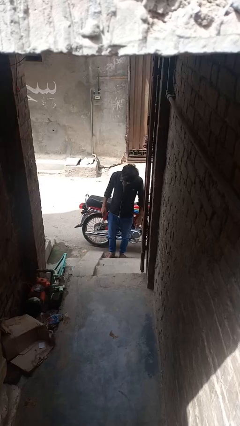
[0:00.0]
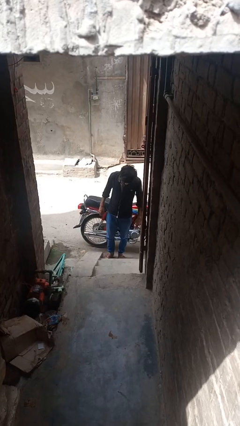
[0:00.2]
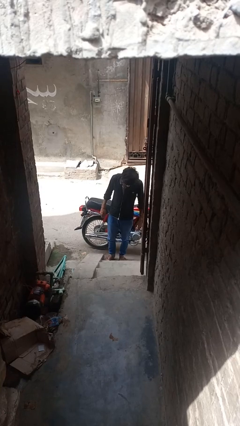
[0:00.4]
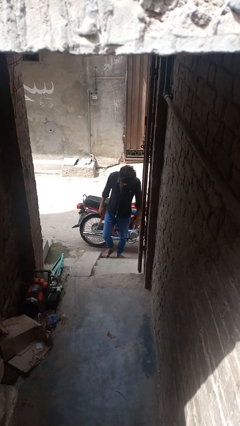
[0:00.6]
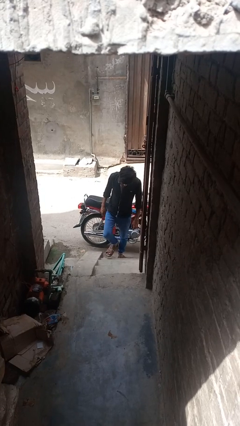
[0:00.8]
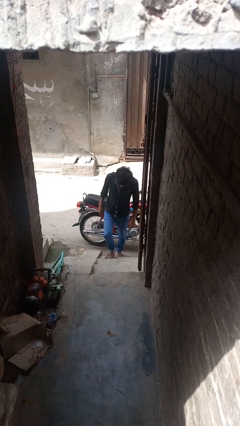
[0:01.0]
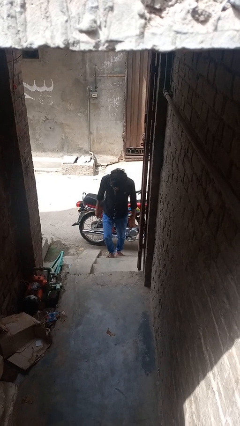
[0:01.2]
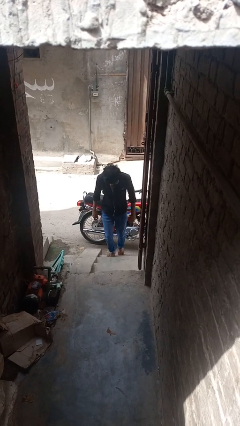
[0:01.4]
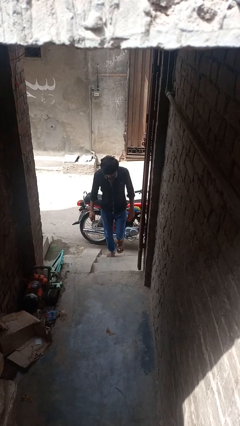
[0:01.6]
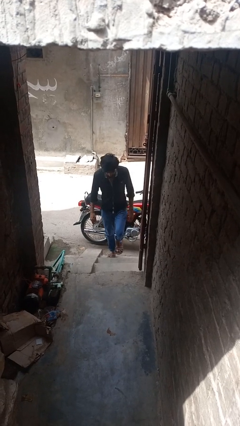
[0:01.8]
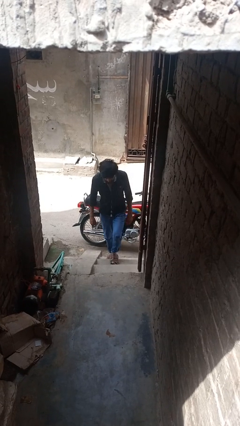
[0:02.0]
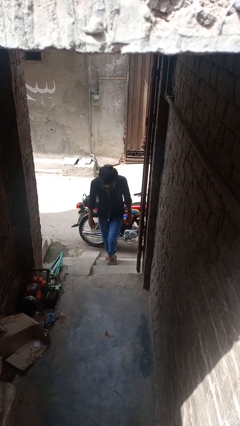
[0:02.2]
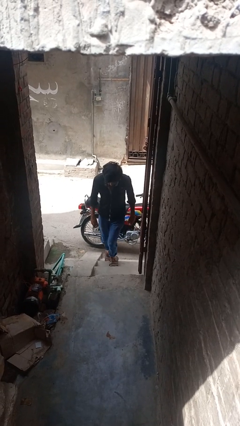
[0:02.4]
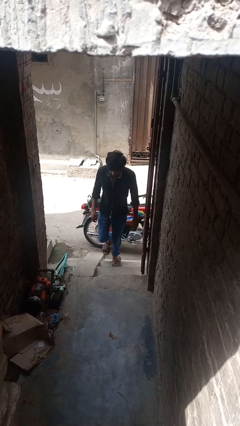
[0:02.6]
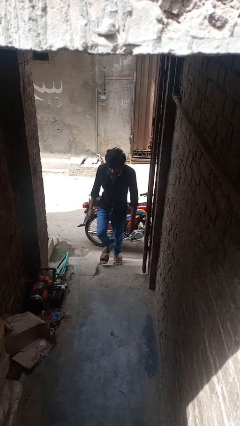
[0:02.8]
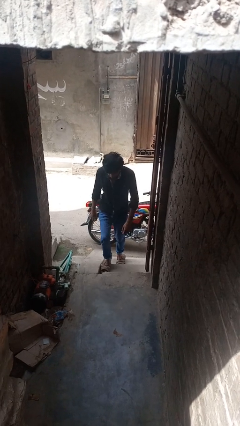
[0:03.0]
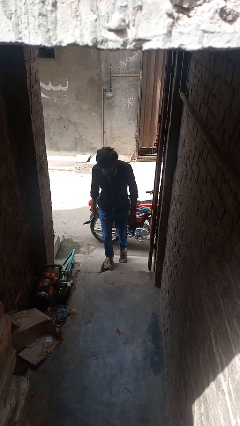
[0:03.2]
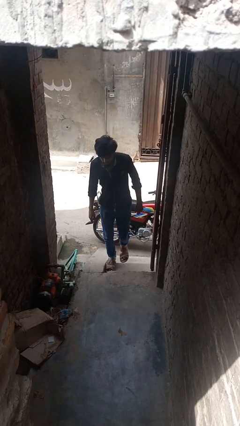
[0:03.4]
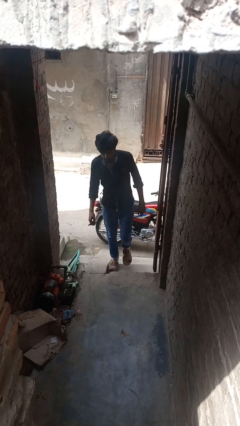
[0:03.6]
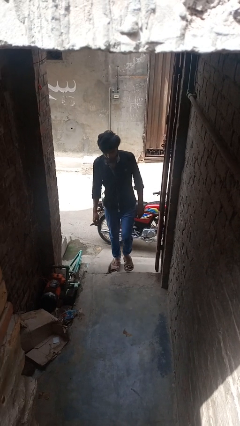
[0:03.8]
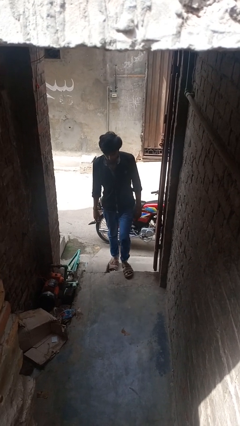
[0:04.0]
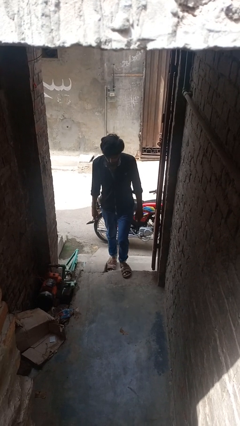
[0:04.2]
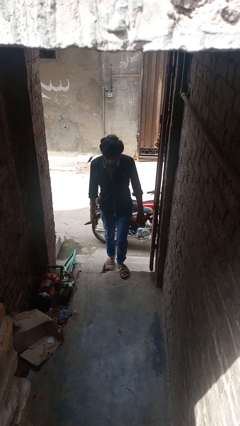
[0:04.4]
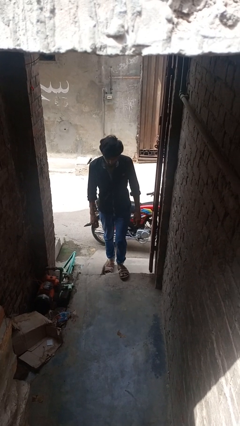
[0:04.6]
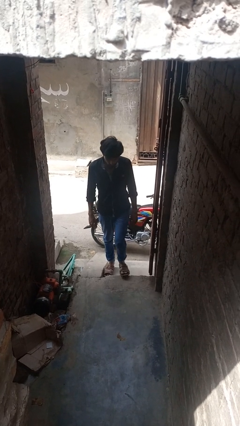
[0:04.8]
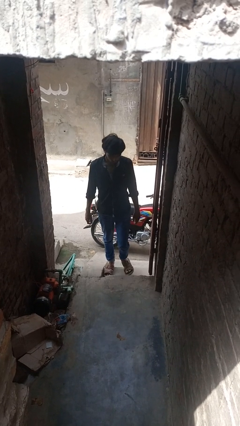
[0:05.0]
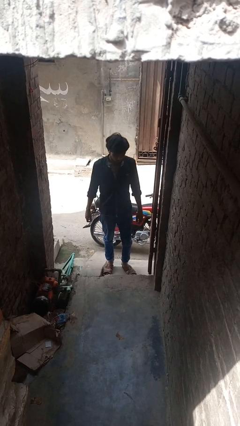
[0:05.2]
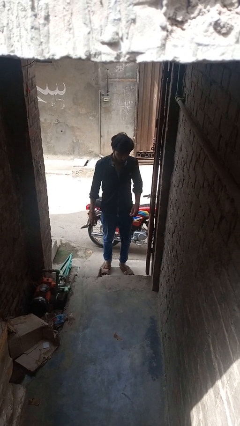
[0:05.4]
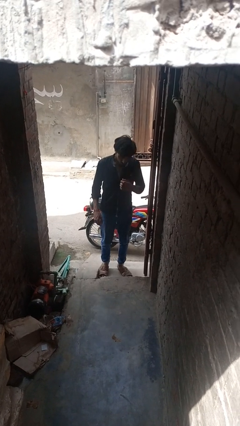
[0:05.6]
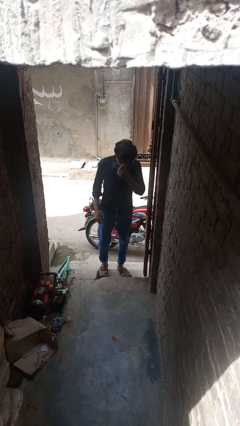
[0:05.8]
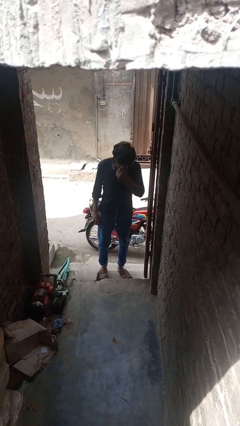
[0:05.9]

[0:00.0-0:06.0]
person climbs up stairs

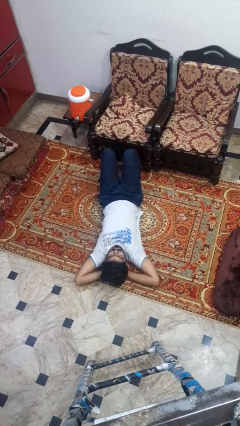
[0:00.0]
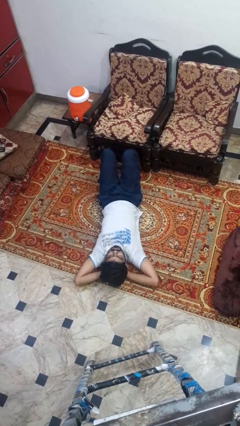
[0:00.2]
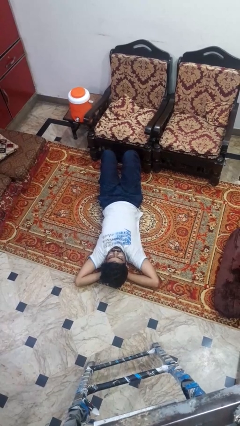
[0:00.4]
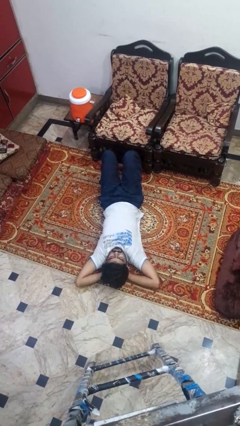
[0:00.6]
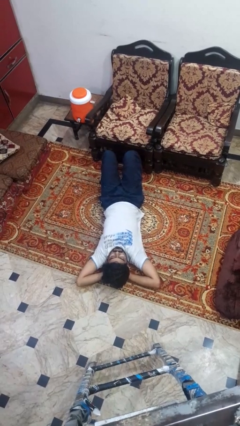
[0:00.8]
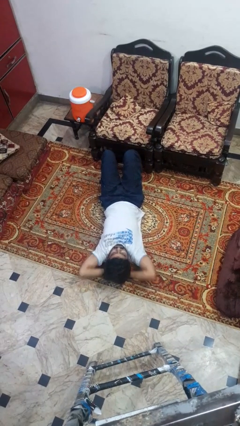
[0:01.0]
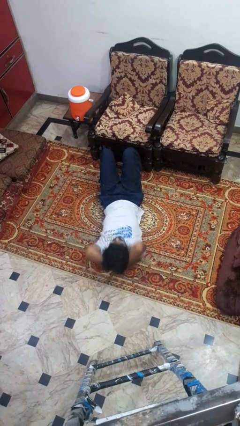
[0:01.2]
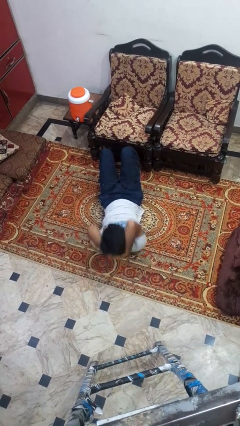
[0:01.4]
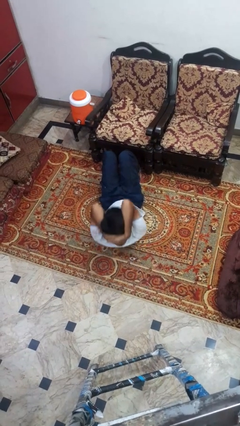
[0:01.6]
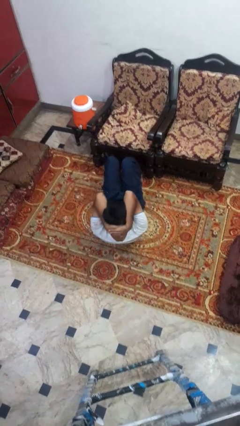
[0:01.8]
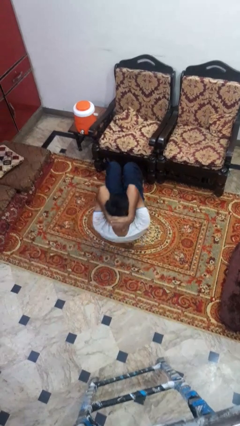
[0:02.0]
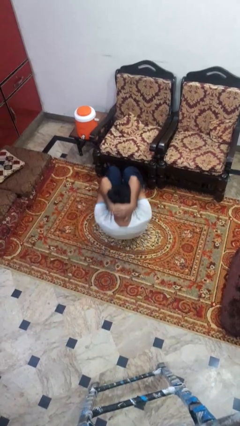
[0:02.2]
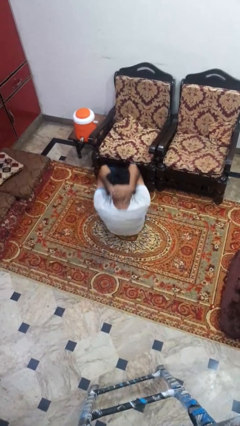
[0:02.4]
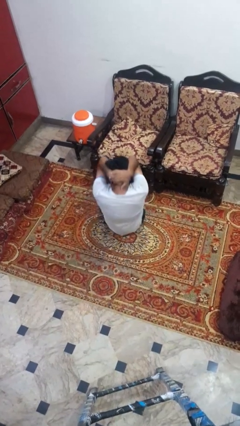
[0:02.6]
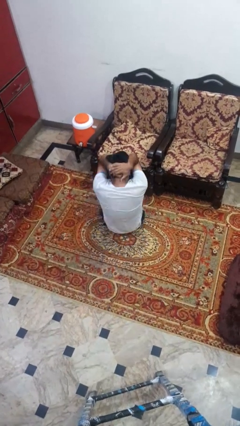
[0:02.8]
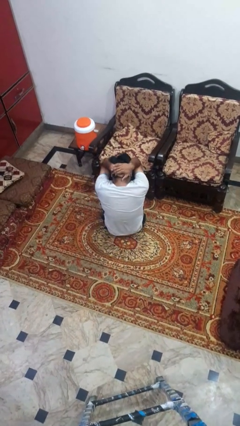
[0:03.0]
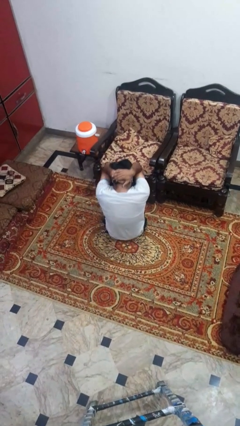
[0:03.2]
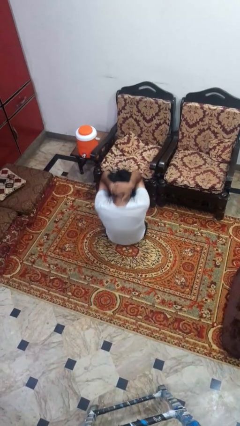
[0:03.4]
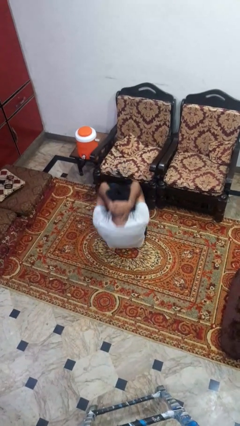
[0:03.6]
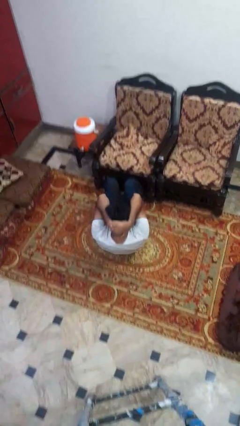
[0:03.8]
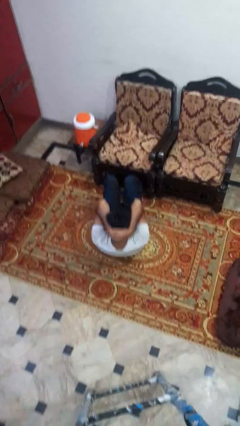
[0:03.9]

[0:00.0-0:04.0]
person exercises with situp

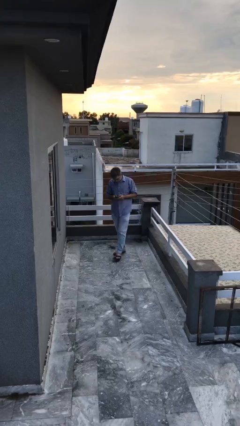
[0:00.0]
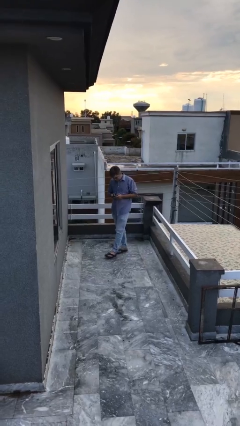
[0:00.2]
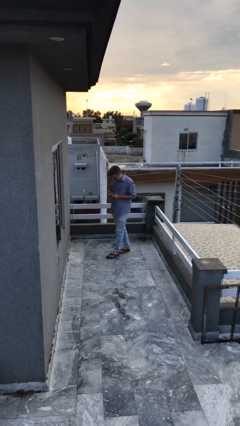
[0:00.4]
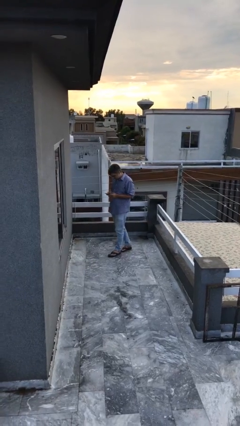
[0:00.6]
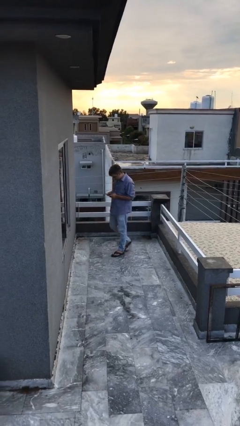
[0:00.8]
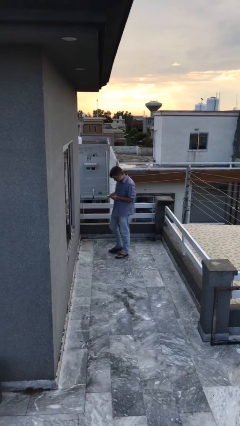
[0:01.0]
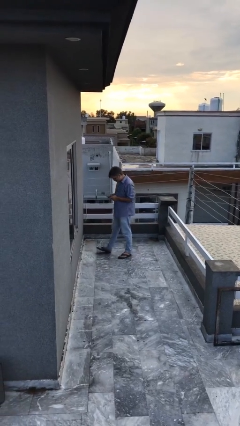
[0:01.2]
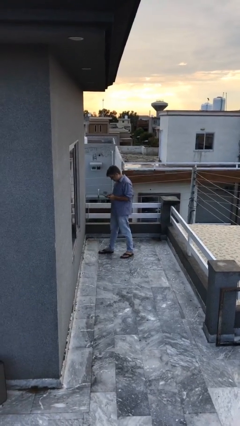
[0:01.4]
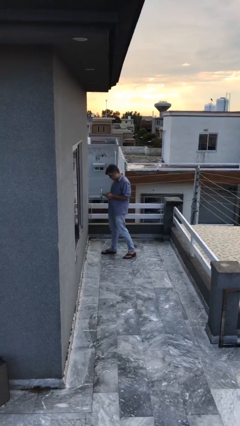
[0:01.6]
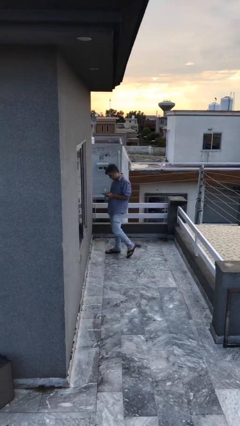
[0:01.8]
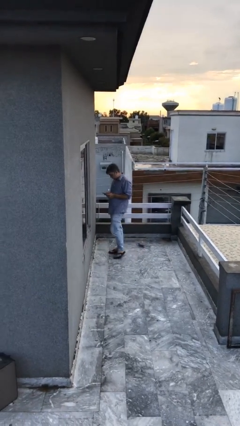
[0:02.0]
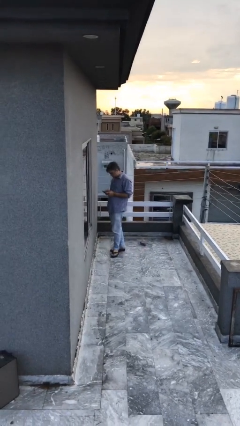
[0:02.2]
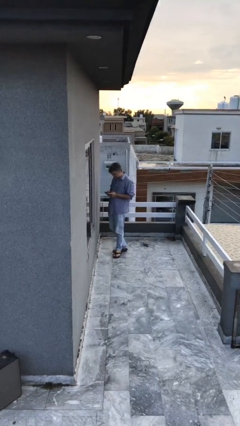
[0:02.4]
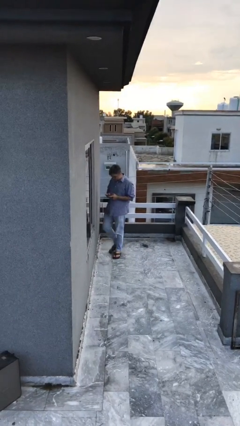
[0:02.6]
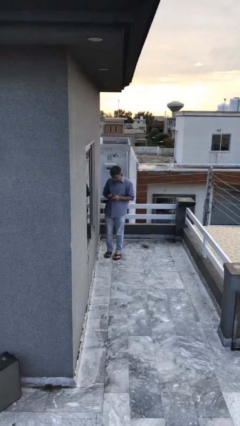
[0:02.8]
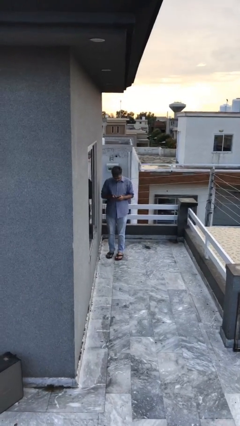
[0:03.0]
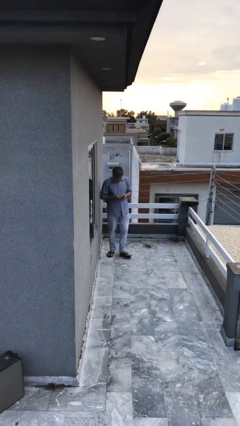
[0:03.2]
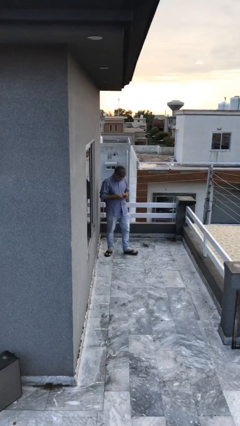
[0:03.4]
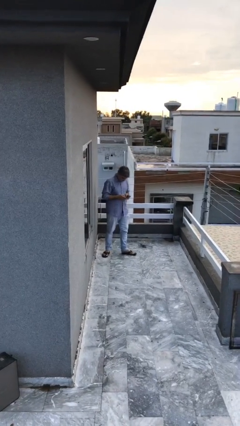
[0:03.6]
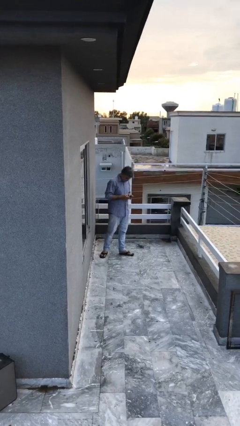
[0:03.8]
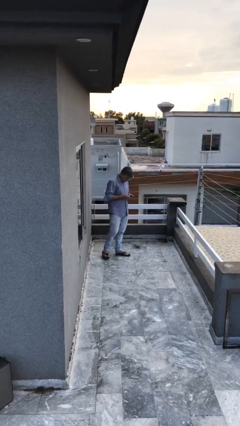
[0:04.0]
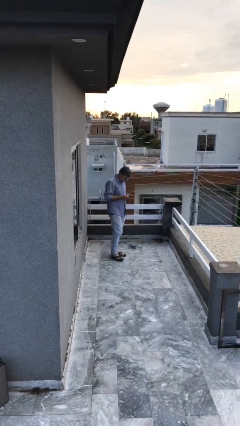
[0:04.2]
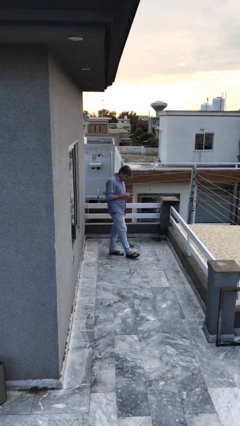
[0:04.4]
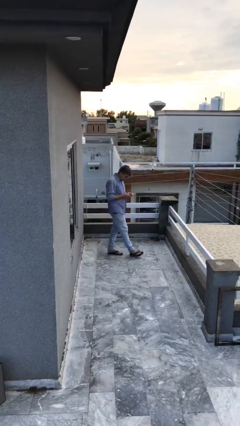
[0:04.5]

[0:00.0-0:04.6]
person texts on phone

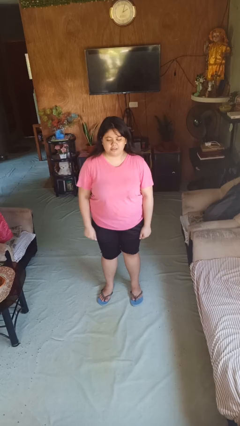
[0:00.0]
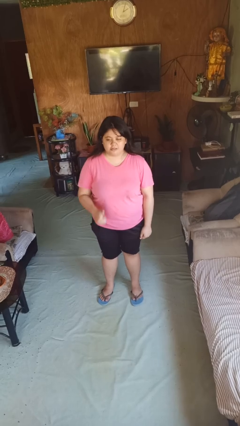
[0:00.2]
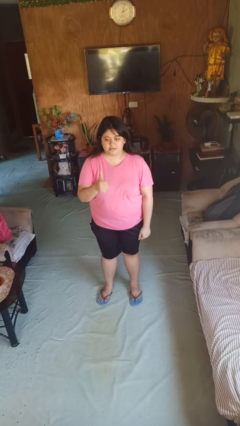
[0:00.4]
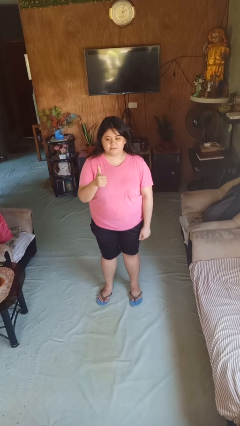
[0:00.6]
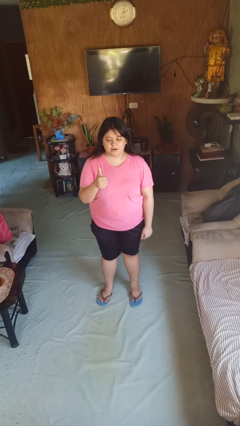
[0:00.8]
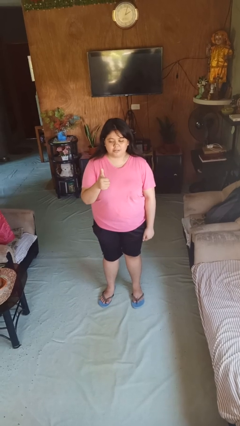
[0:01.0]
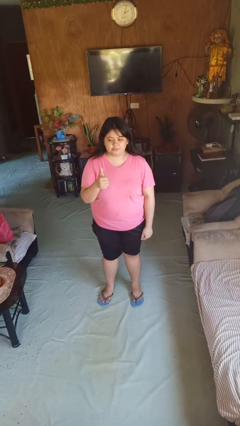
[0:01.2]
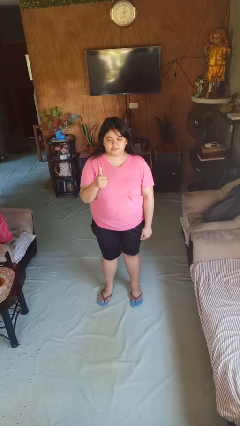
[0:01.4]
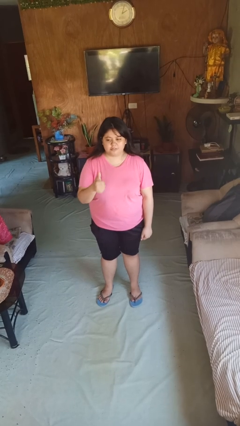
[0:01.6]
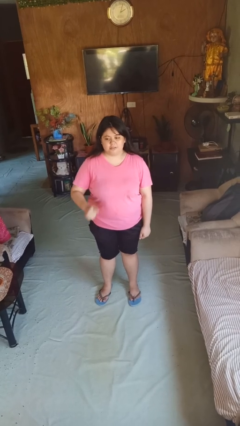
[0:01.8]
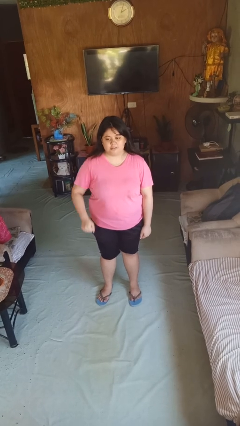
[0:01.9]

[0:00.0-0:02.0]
person gestures thumbs up

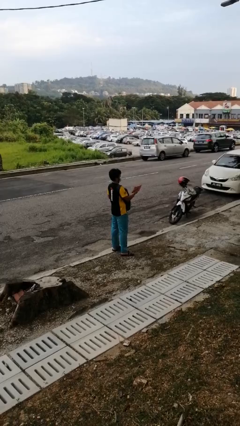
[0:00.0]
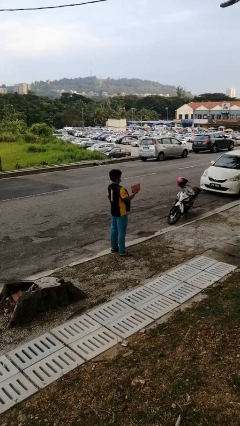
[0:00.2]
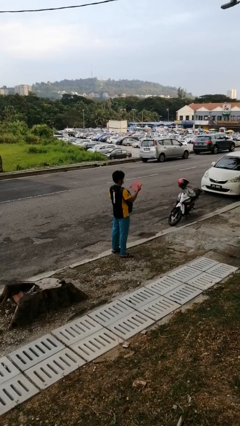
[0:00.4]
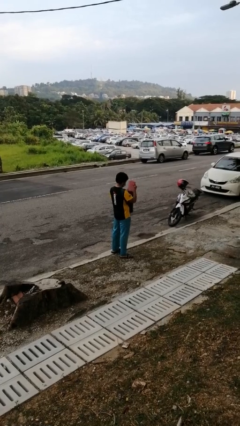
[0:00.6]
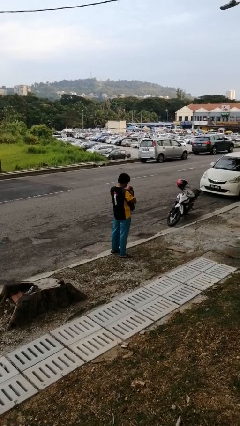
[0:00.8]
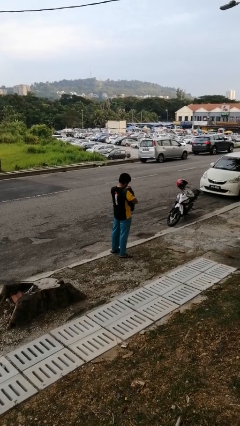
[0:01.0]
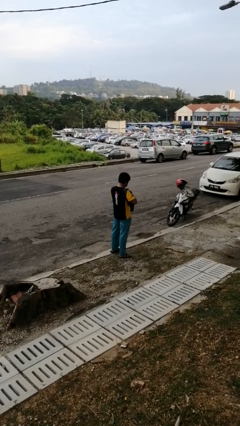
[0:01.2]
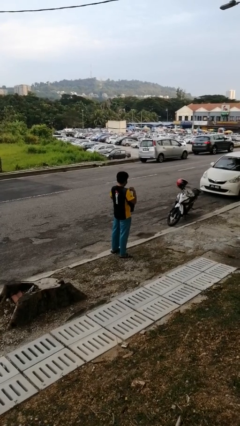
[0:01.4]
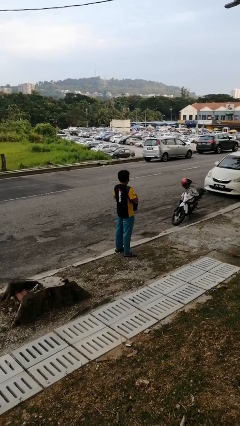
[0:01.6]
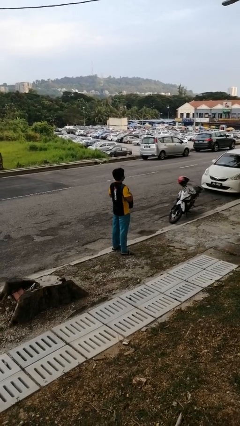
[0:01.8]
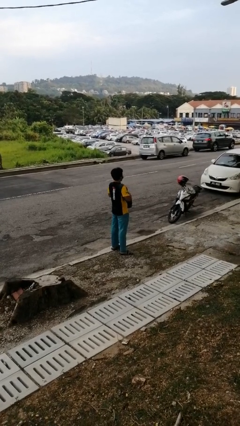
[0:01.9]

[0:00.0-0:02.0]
person puts object into backpack
